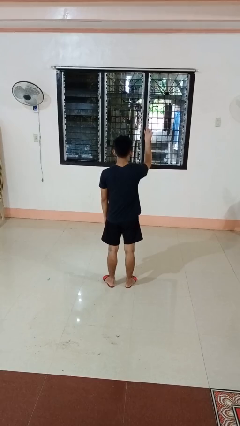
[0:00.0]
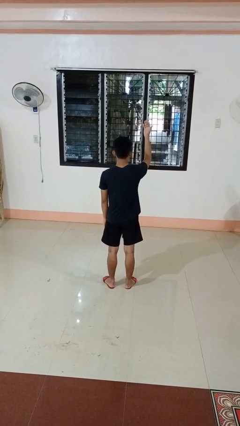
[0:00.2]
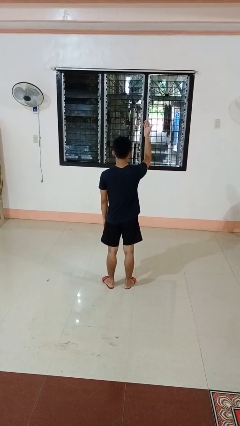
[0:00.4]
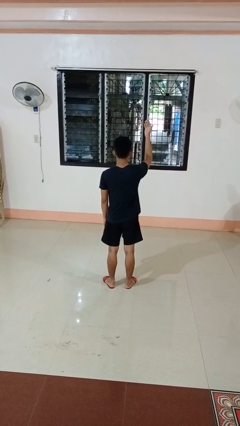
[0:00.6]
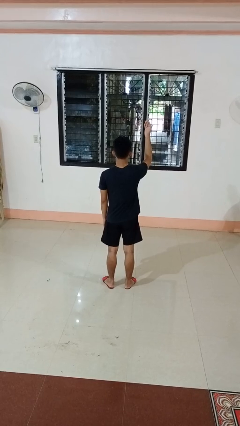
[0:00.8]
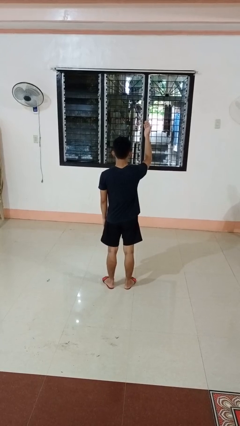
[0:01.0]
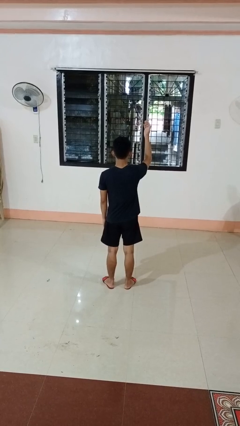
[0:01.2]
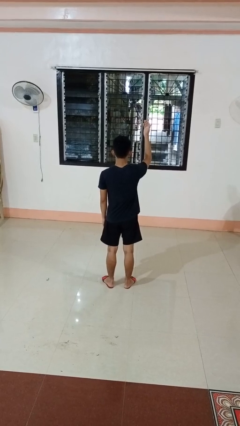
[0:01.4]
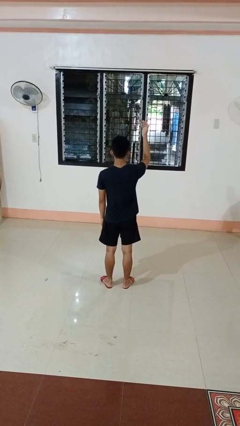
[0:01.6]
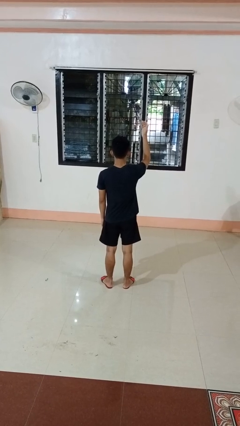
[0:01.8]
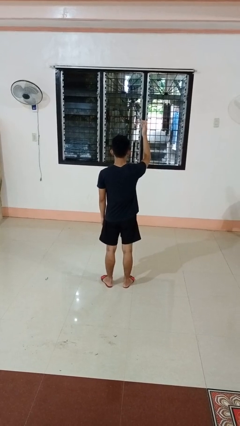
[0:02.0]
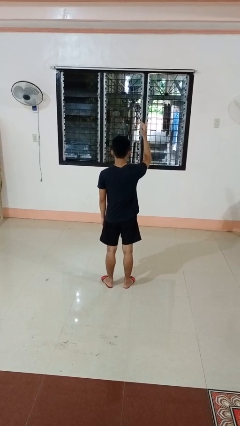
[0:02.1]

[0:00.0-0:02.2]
person gestures swipe up

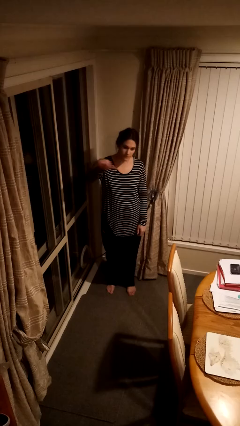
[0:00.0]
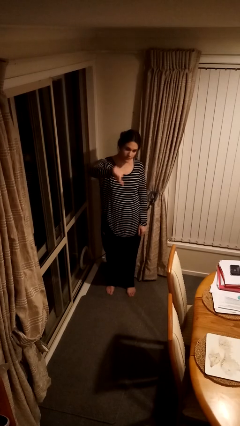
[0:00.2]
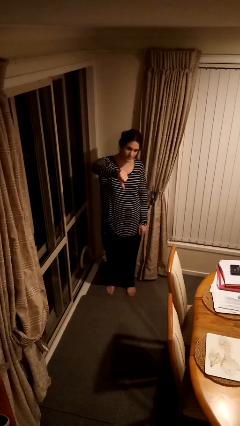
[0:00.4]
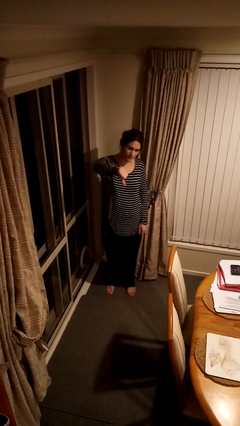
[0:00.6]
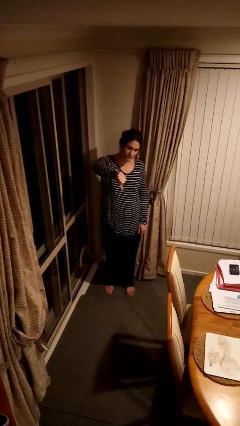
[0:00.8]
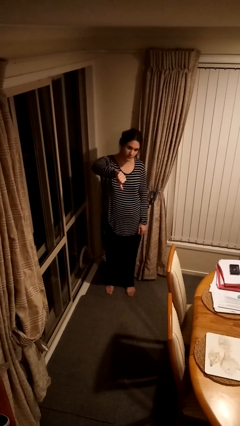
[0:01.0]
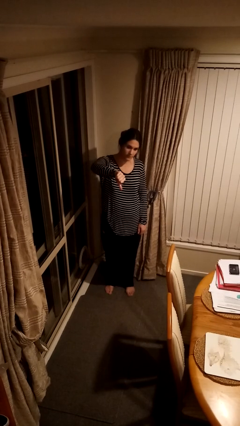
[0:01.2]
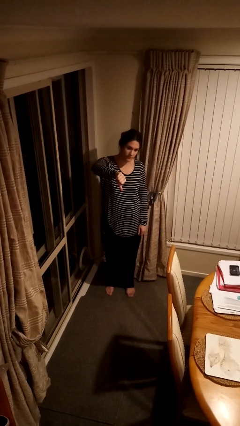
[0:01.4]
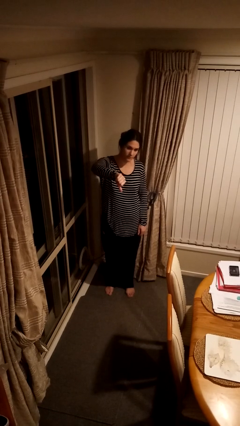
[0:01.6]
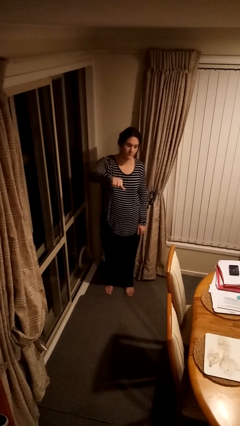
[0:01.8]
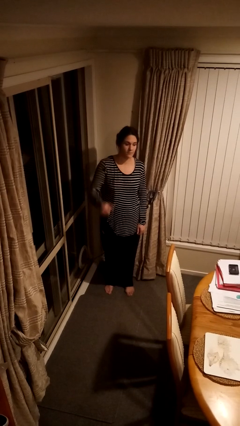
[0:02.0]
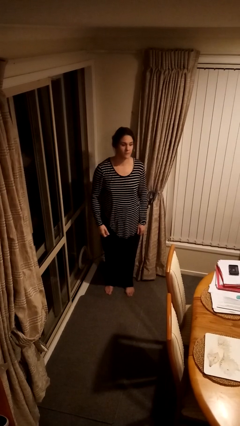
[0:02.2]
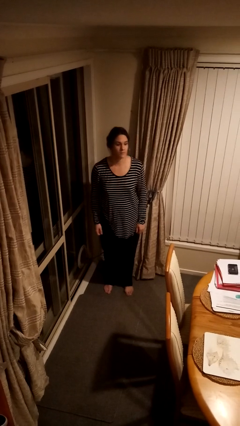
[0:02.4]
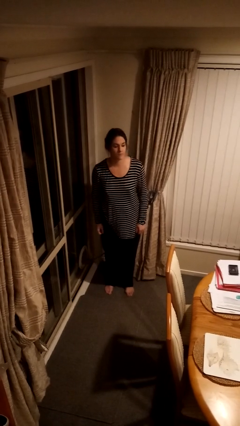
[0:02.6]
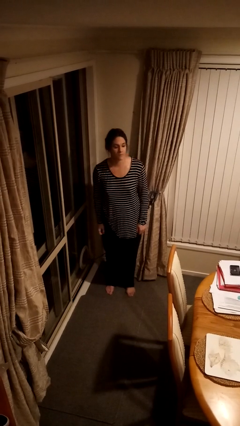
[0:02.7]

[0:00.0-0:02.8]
person gestures thumbs down

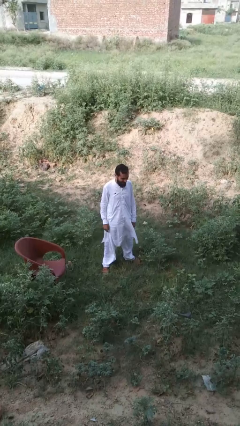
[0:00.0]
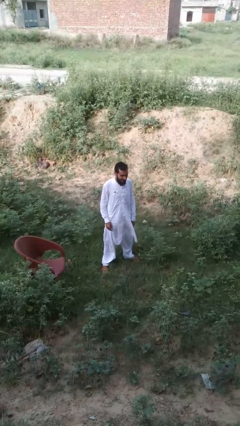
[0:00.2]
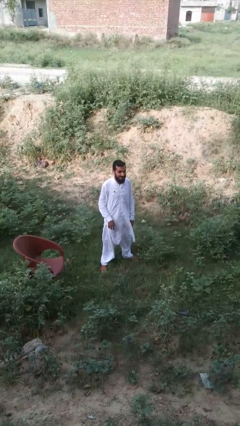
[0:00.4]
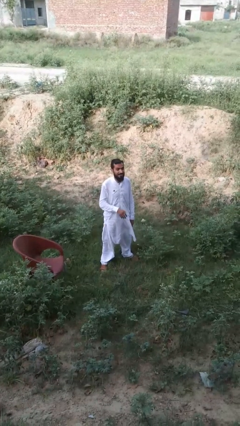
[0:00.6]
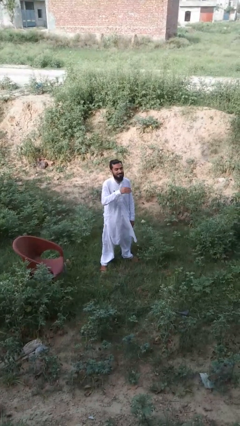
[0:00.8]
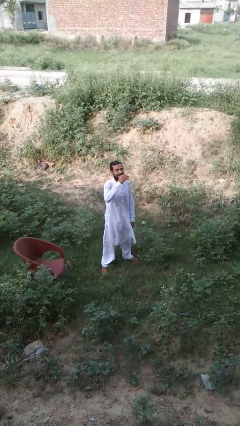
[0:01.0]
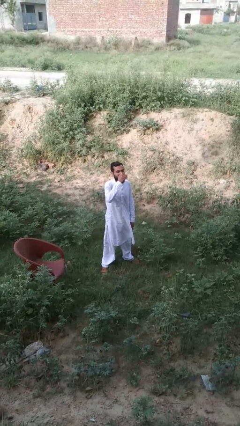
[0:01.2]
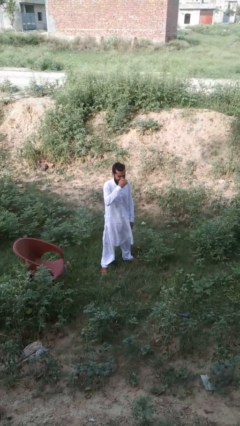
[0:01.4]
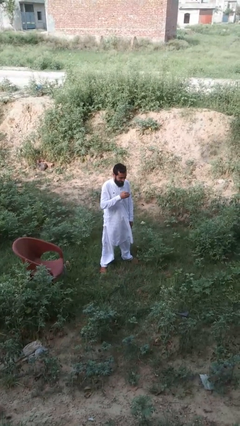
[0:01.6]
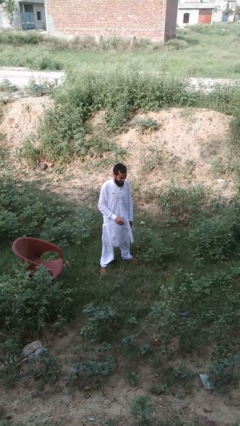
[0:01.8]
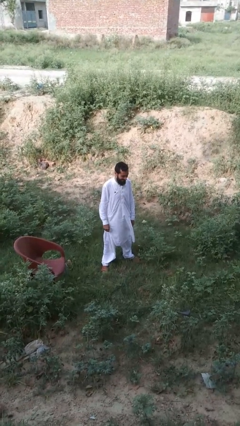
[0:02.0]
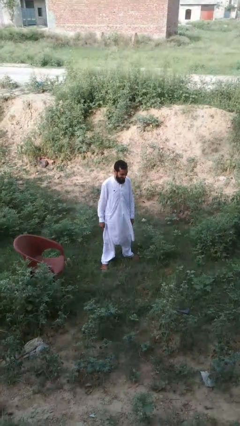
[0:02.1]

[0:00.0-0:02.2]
person sneezes into hand

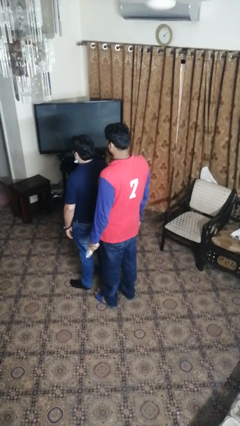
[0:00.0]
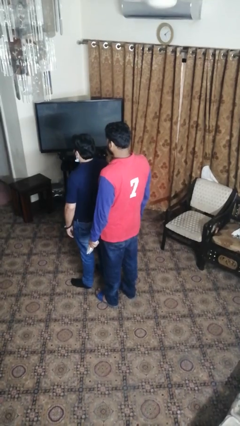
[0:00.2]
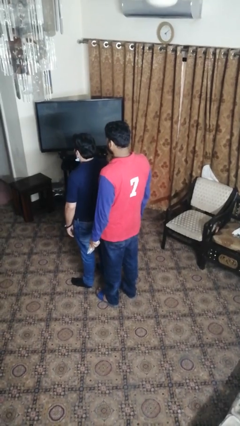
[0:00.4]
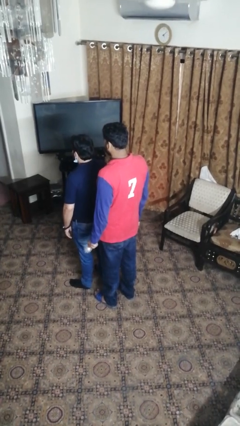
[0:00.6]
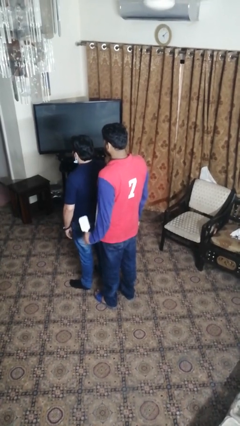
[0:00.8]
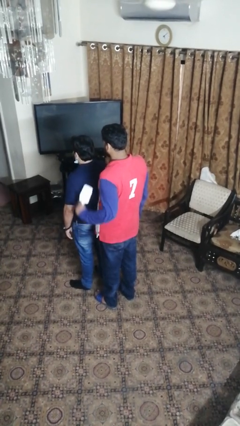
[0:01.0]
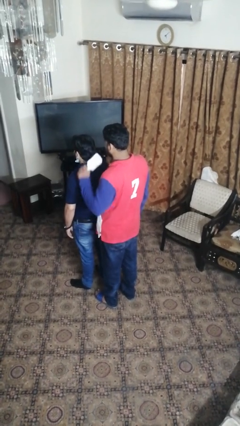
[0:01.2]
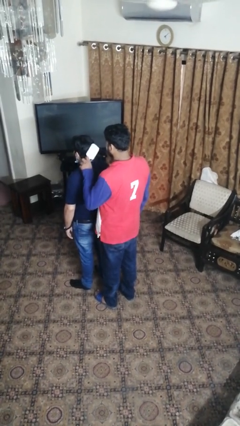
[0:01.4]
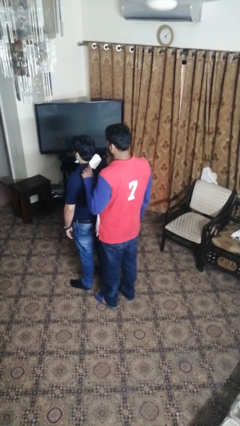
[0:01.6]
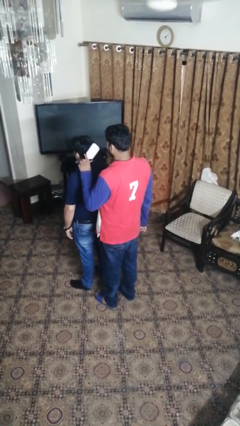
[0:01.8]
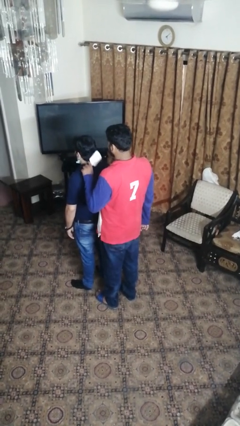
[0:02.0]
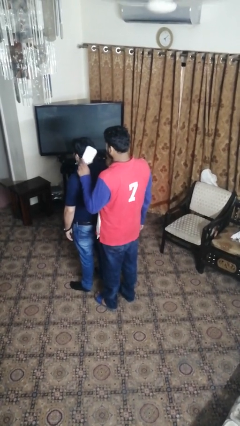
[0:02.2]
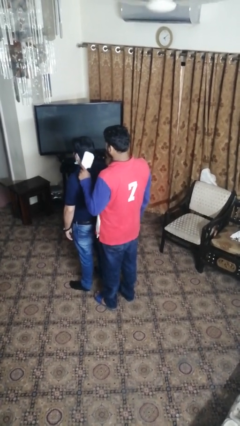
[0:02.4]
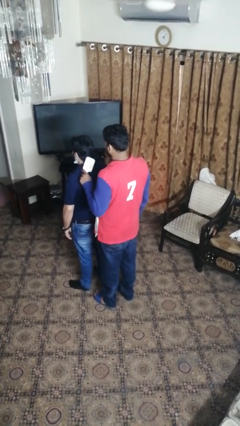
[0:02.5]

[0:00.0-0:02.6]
person brushes hair of person

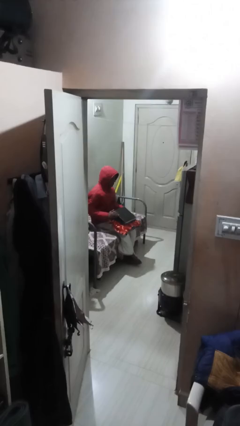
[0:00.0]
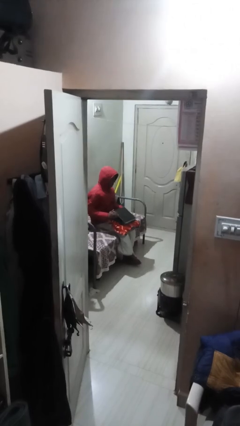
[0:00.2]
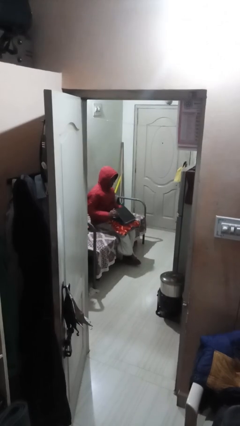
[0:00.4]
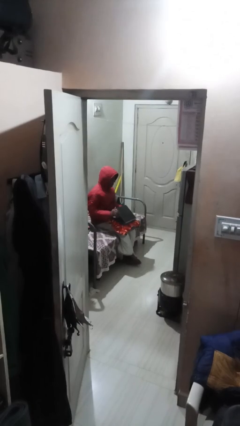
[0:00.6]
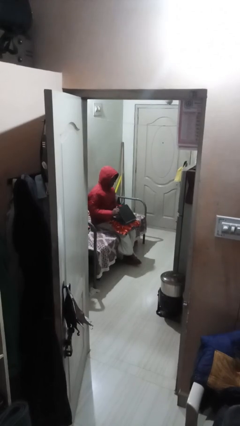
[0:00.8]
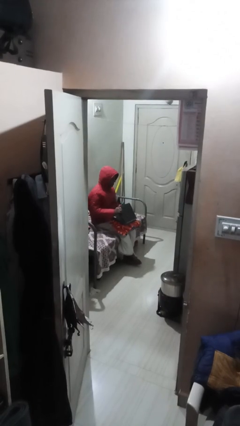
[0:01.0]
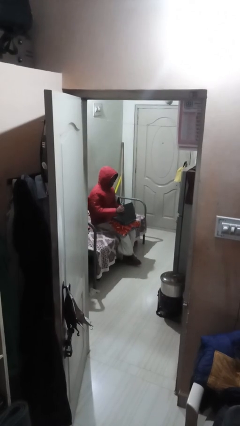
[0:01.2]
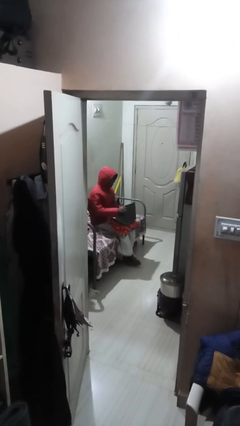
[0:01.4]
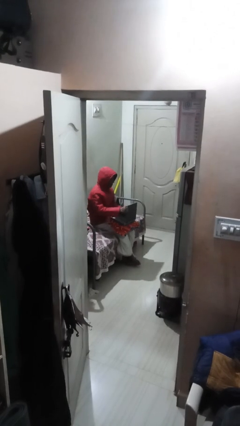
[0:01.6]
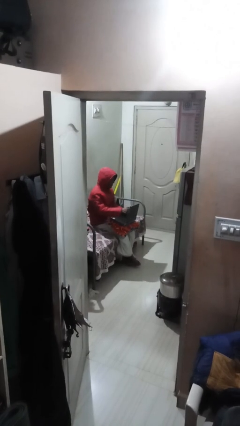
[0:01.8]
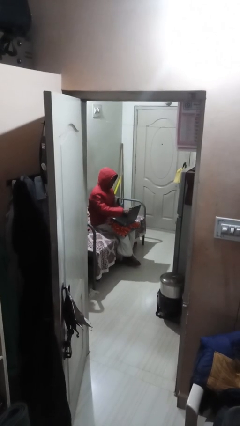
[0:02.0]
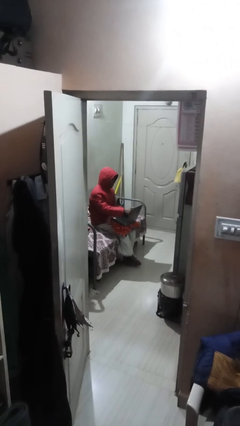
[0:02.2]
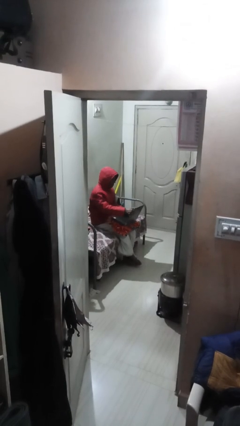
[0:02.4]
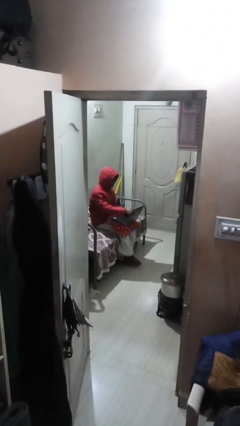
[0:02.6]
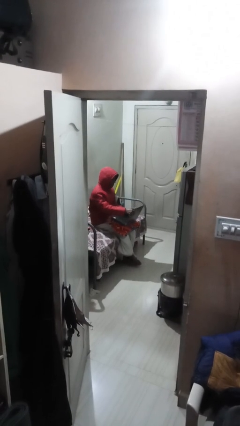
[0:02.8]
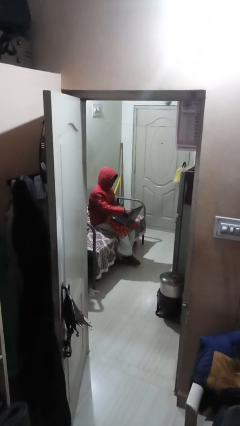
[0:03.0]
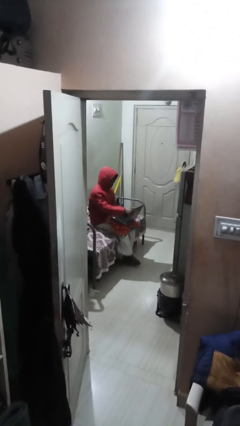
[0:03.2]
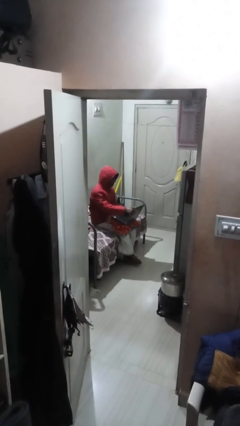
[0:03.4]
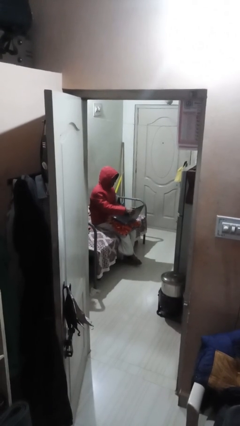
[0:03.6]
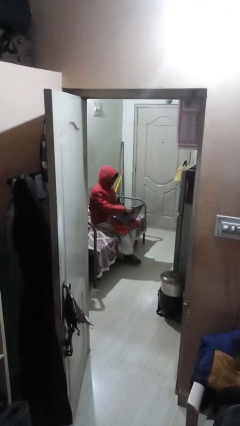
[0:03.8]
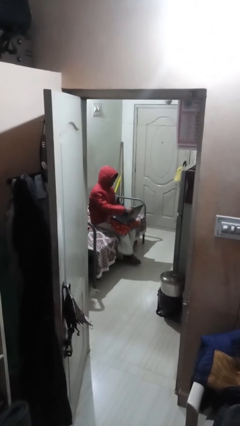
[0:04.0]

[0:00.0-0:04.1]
person interacts with laptop

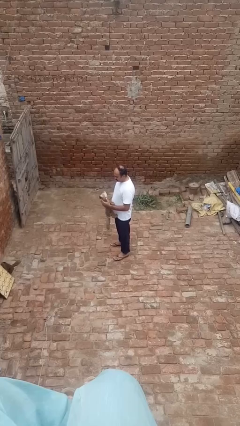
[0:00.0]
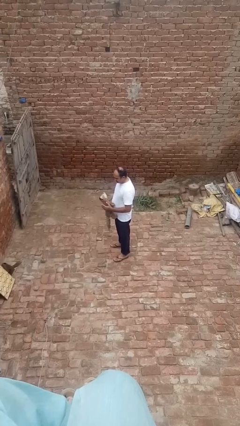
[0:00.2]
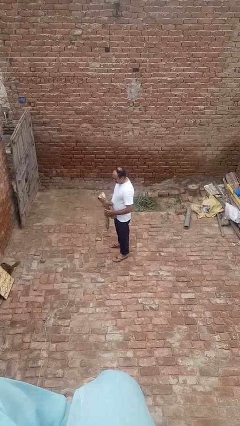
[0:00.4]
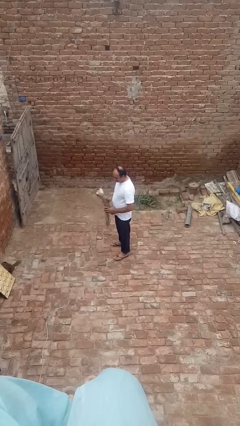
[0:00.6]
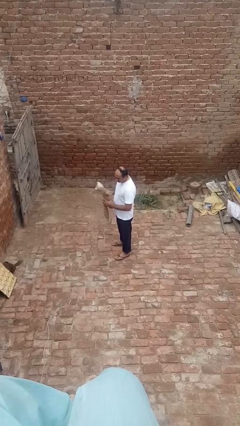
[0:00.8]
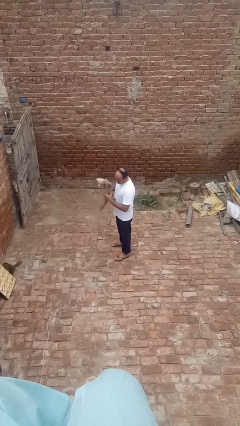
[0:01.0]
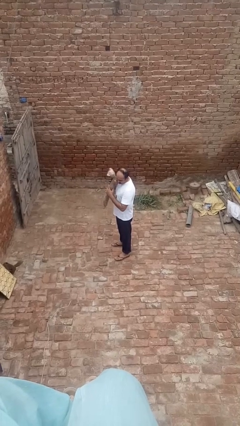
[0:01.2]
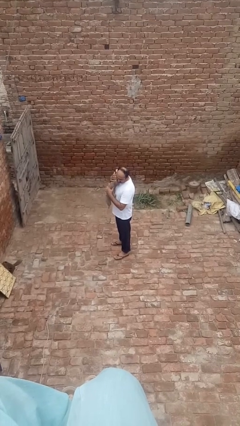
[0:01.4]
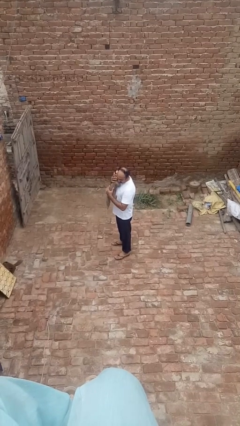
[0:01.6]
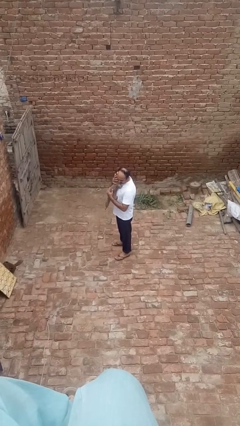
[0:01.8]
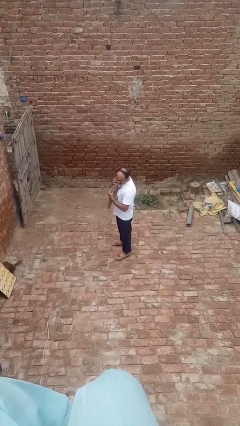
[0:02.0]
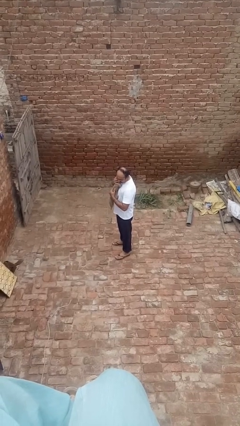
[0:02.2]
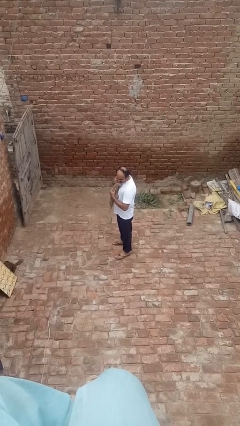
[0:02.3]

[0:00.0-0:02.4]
person hugs stuffed animal

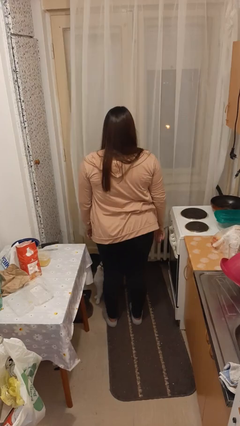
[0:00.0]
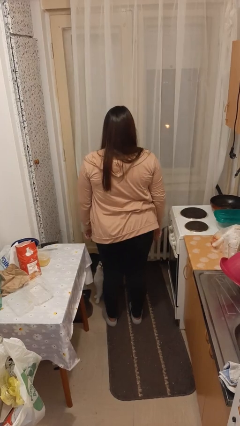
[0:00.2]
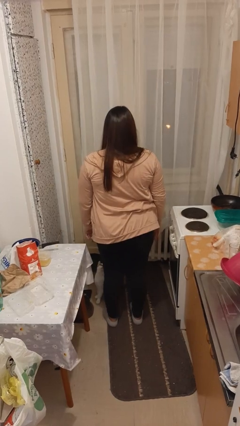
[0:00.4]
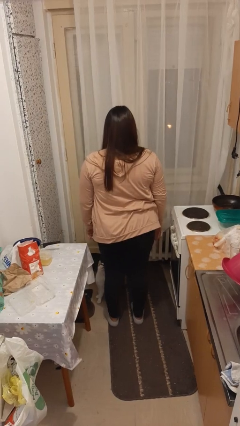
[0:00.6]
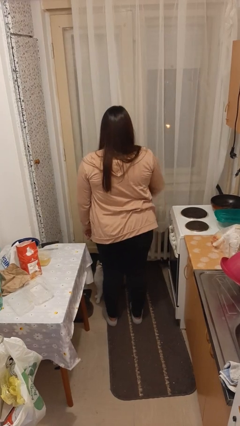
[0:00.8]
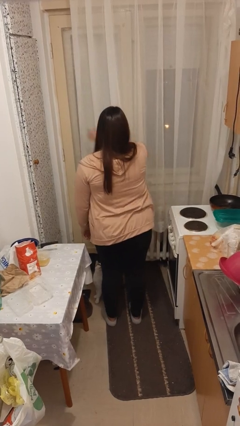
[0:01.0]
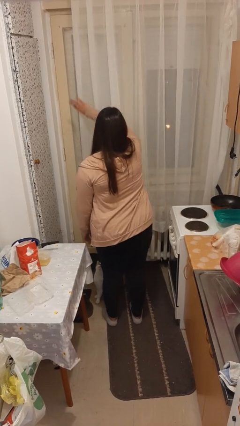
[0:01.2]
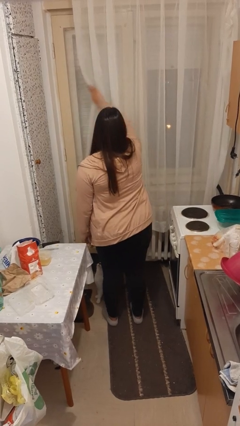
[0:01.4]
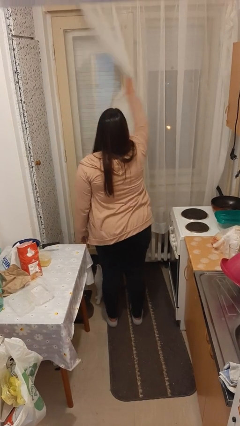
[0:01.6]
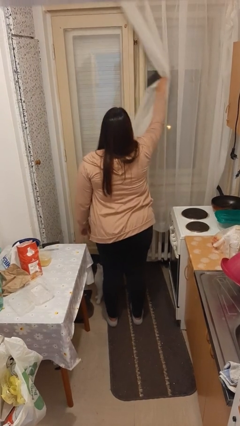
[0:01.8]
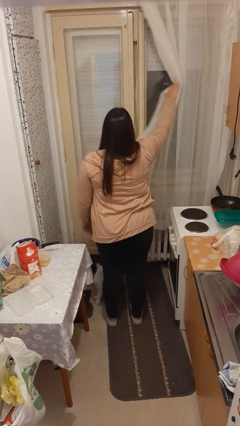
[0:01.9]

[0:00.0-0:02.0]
person opens curtains
